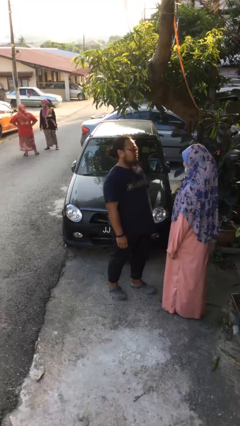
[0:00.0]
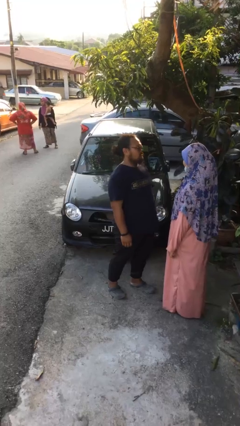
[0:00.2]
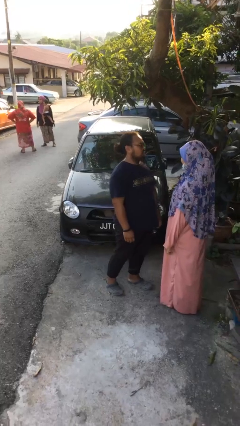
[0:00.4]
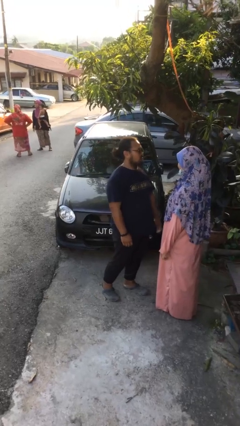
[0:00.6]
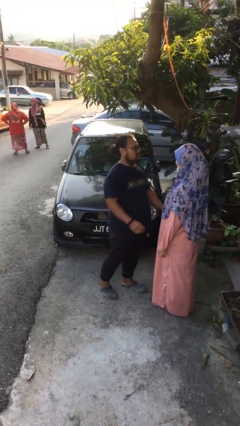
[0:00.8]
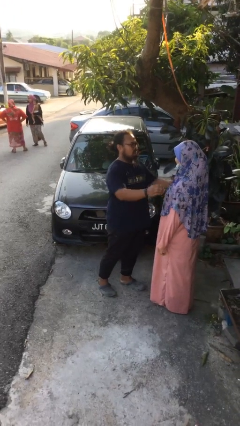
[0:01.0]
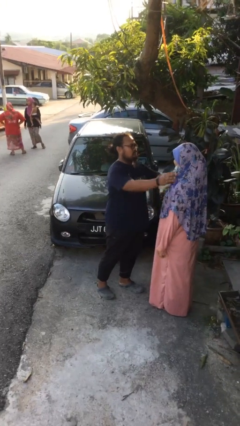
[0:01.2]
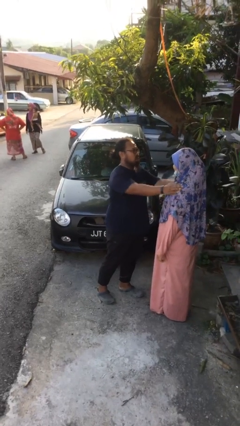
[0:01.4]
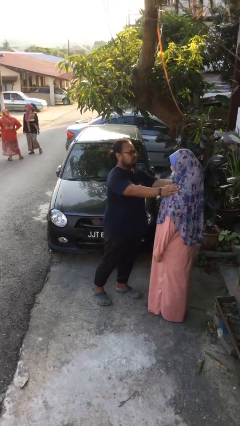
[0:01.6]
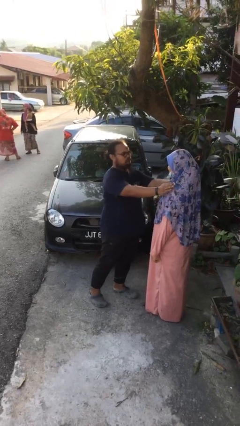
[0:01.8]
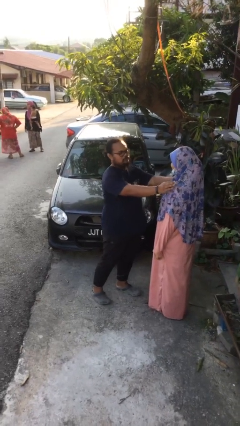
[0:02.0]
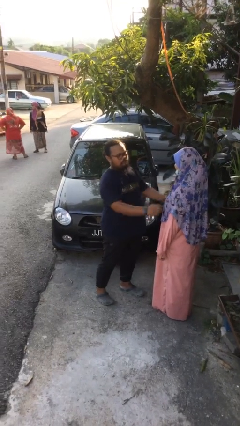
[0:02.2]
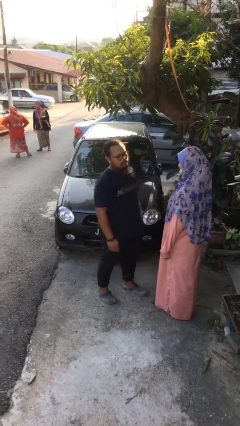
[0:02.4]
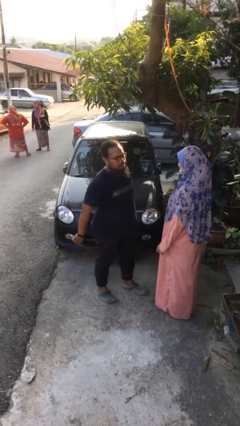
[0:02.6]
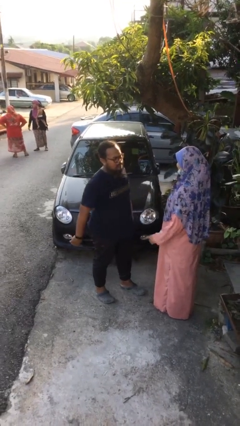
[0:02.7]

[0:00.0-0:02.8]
person pounds shoulders of person

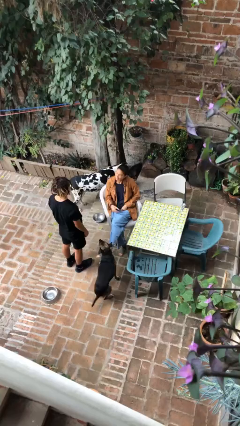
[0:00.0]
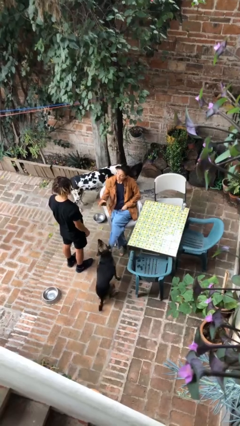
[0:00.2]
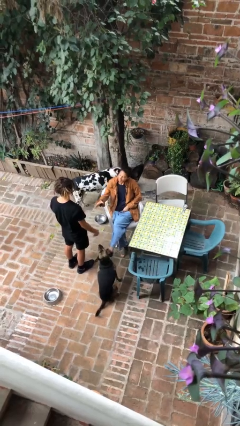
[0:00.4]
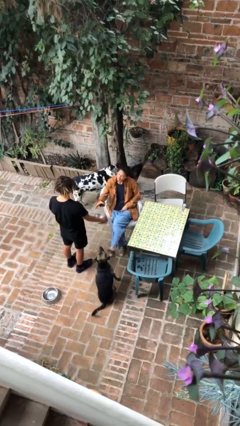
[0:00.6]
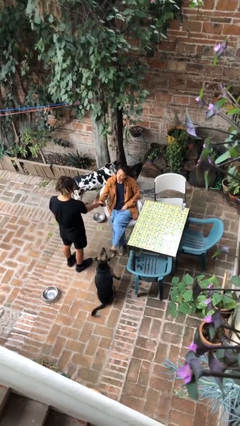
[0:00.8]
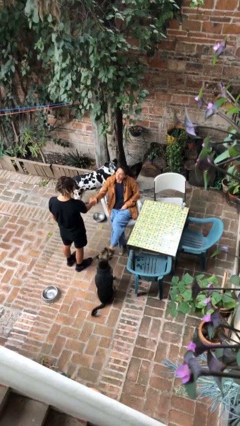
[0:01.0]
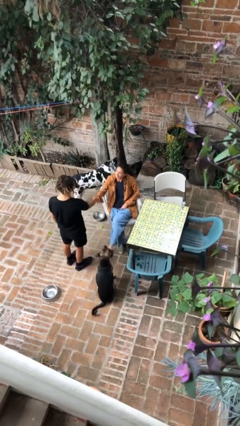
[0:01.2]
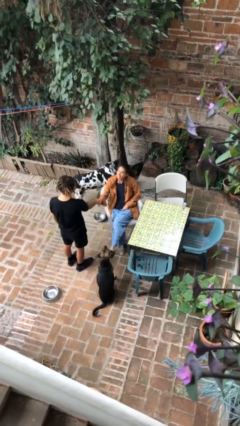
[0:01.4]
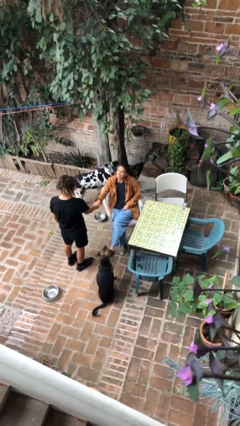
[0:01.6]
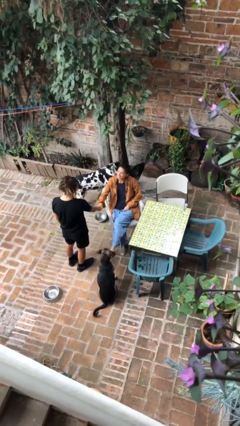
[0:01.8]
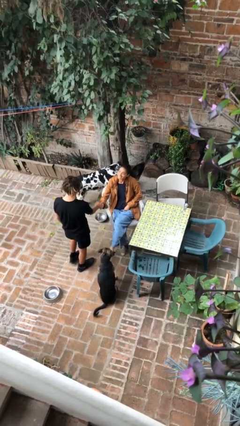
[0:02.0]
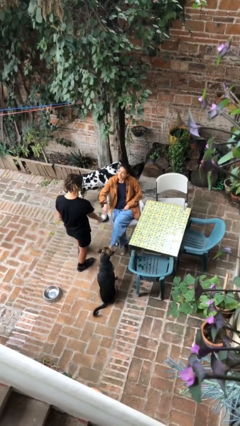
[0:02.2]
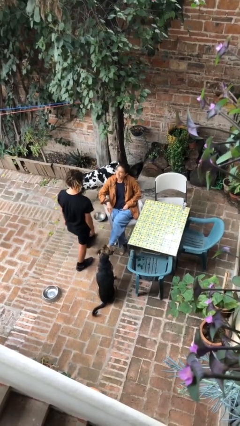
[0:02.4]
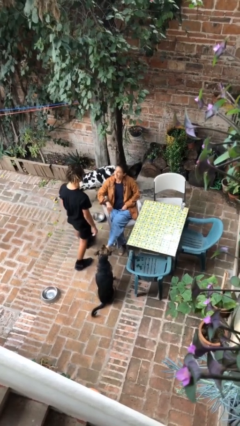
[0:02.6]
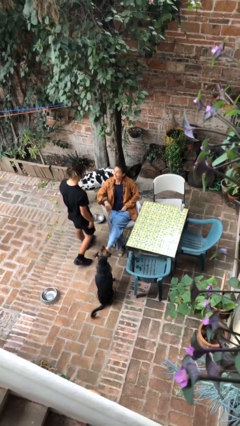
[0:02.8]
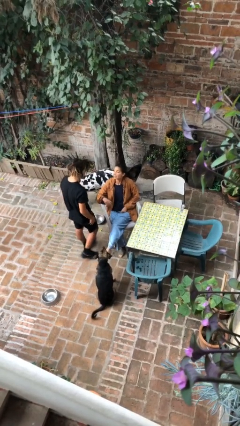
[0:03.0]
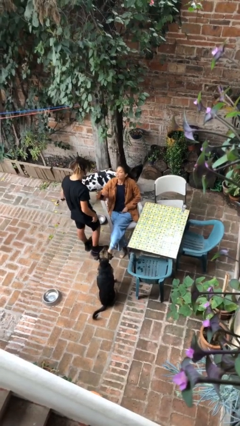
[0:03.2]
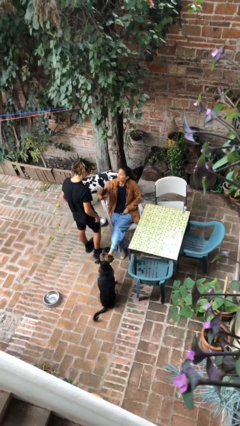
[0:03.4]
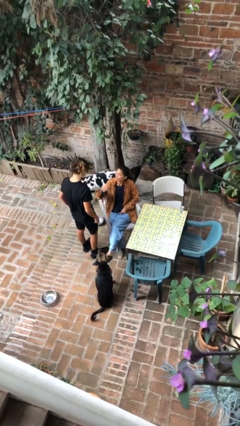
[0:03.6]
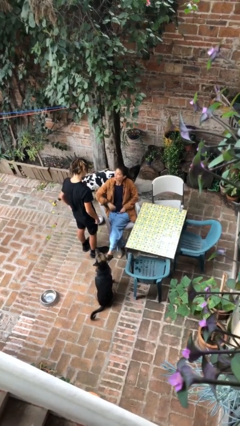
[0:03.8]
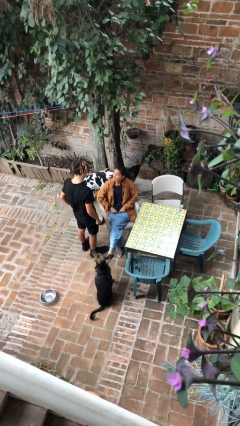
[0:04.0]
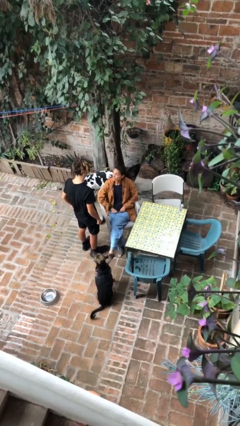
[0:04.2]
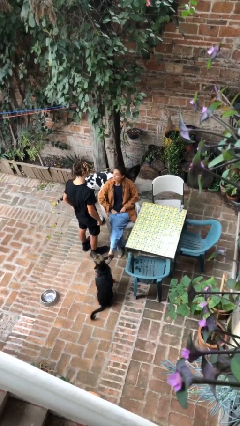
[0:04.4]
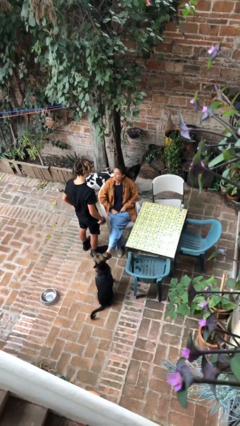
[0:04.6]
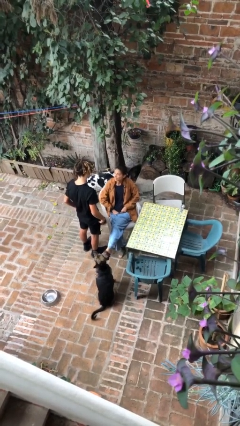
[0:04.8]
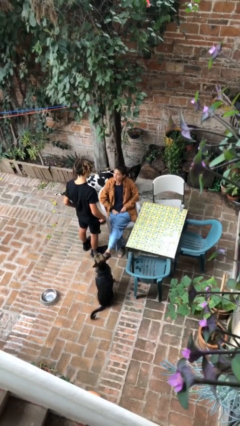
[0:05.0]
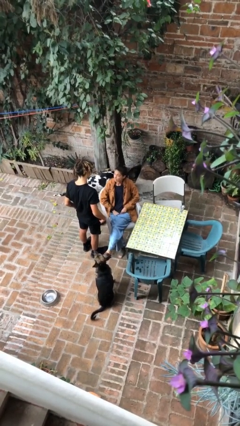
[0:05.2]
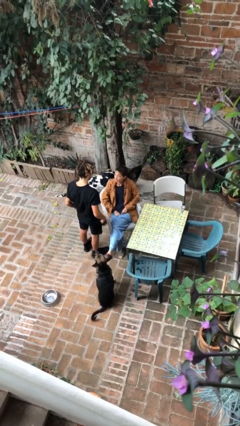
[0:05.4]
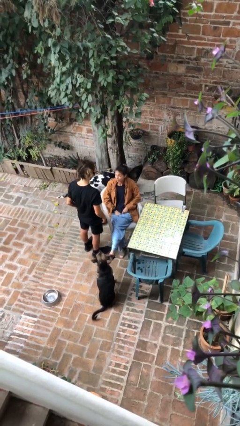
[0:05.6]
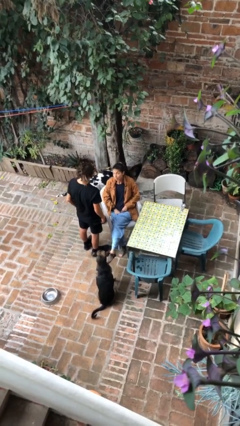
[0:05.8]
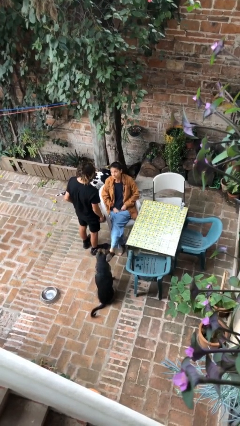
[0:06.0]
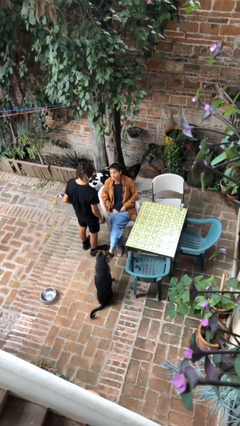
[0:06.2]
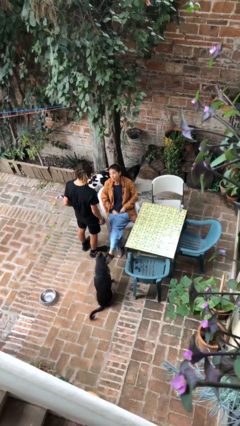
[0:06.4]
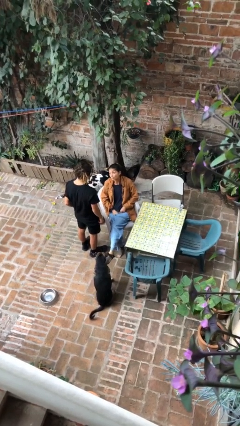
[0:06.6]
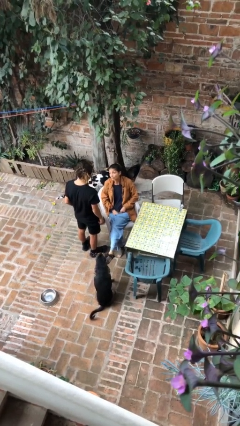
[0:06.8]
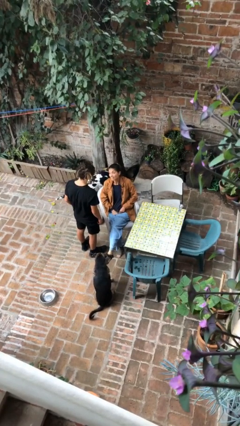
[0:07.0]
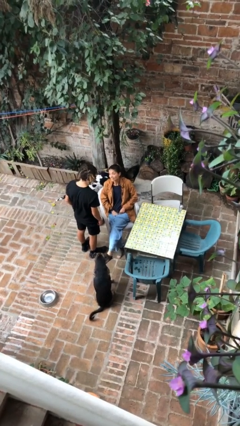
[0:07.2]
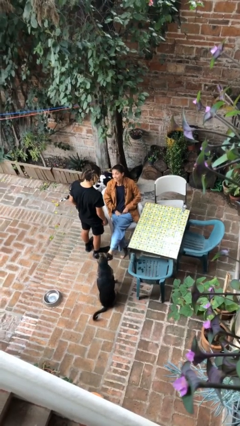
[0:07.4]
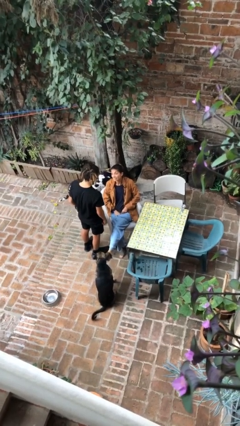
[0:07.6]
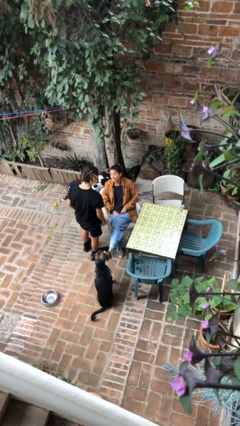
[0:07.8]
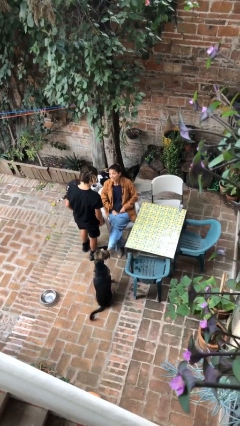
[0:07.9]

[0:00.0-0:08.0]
person shakes hand

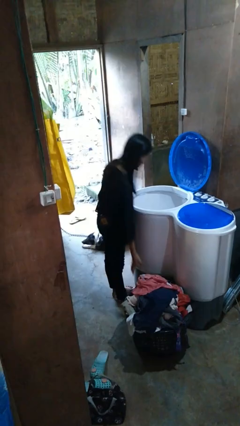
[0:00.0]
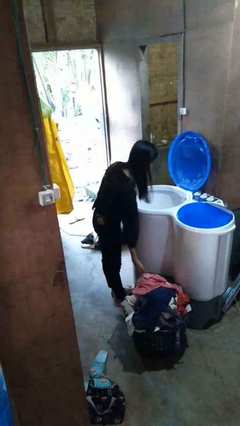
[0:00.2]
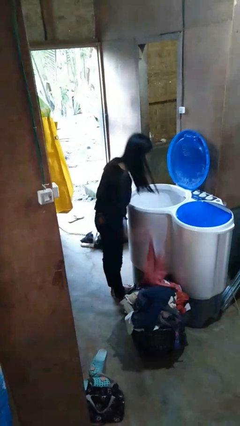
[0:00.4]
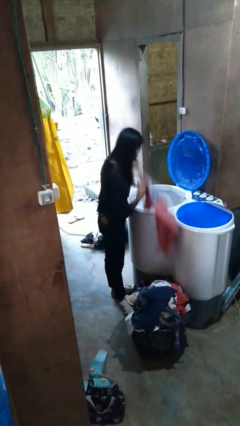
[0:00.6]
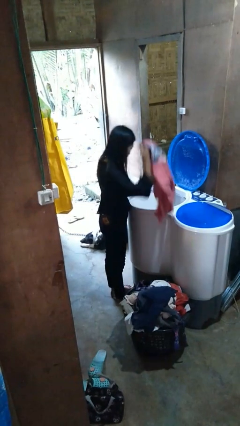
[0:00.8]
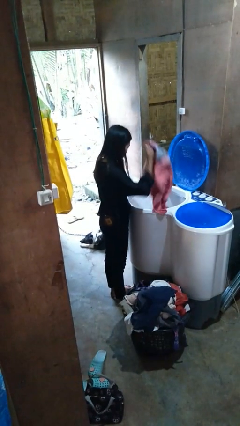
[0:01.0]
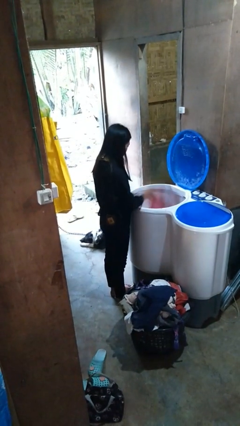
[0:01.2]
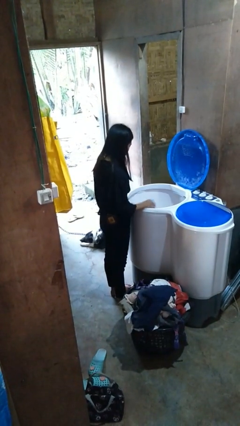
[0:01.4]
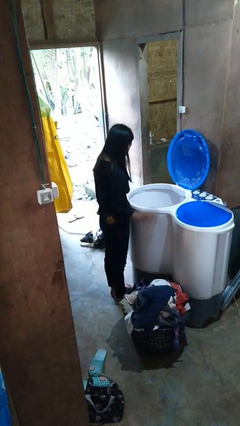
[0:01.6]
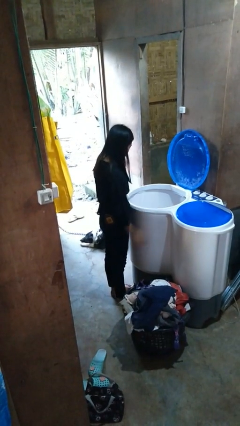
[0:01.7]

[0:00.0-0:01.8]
person loads clotheswasher

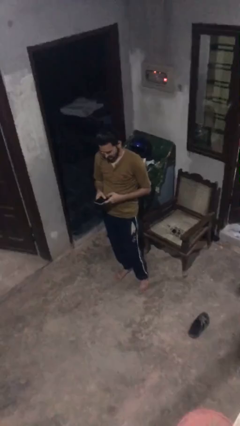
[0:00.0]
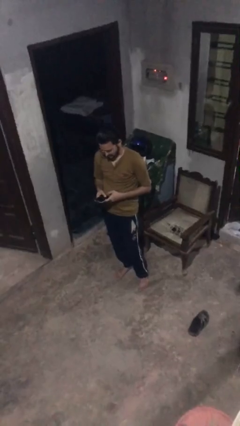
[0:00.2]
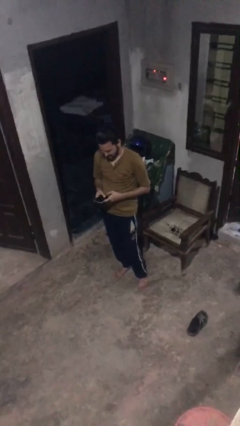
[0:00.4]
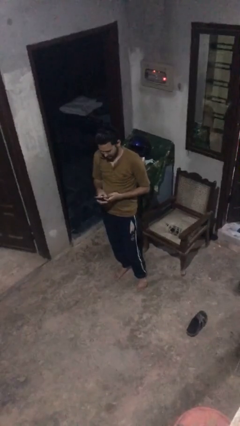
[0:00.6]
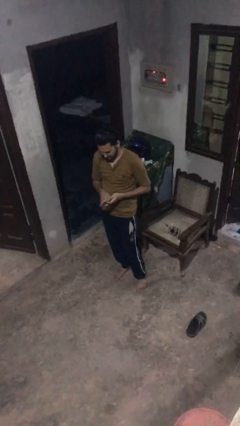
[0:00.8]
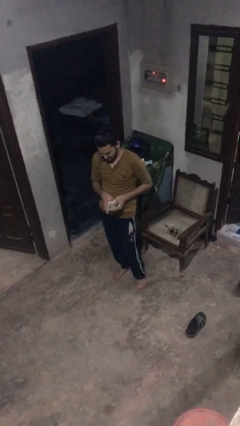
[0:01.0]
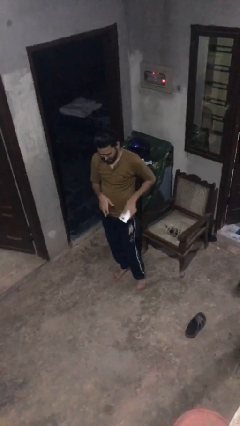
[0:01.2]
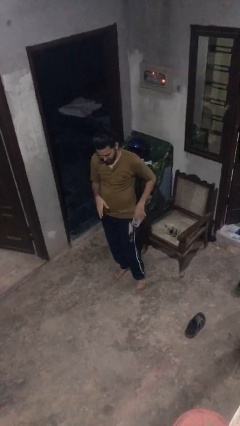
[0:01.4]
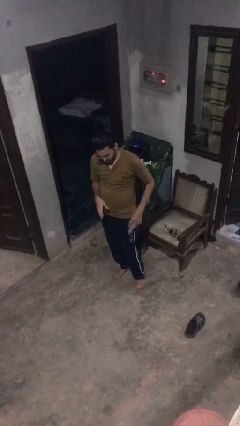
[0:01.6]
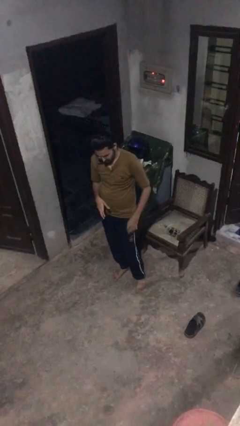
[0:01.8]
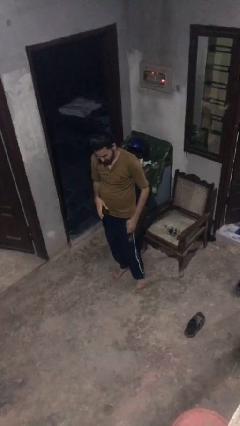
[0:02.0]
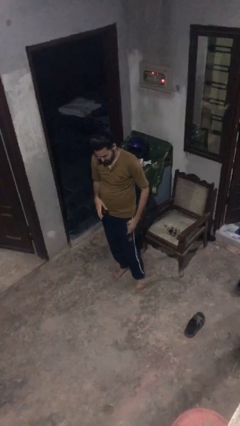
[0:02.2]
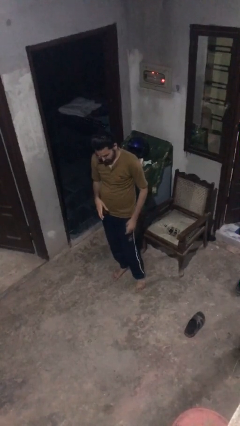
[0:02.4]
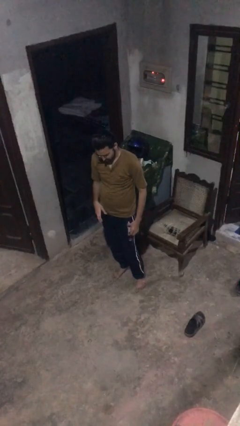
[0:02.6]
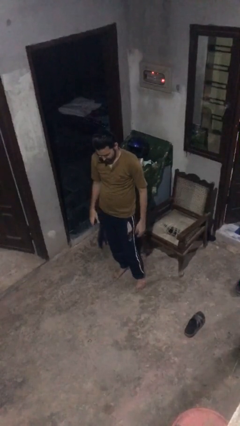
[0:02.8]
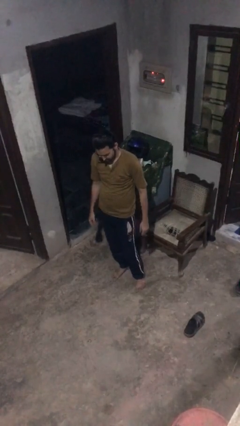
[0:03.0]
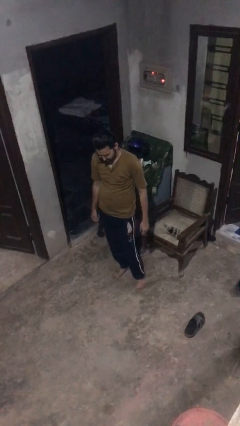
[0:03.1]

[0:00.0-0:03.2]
person puts phone into pocket

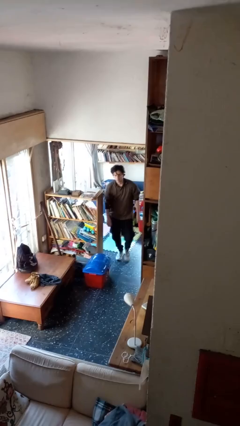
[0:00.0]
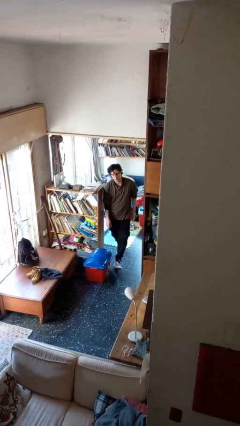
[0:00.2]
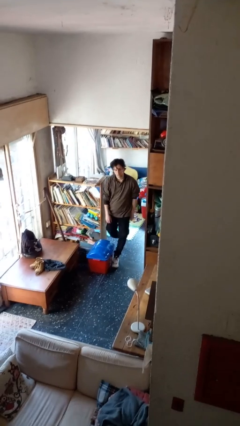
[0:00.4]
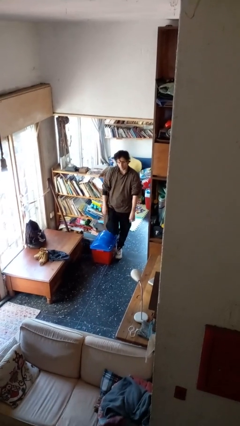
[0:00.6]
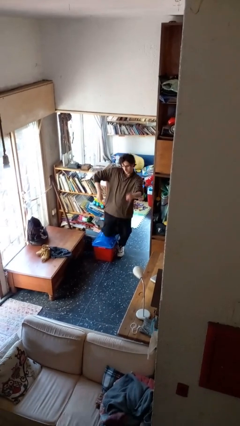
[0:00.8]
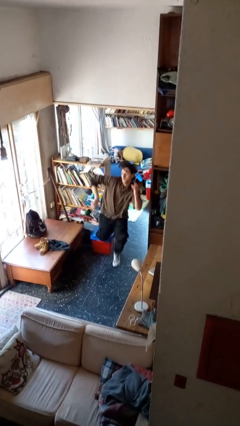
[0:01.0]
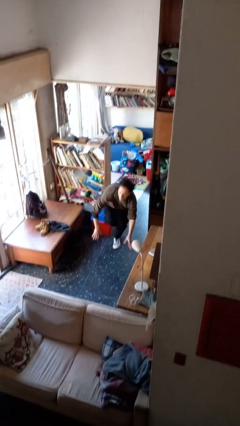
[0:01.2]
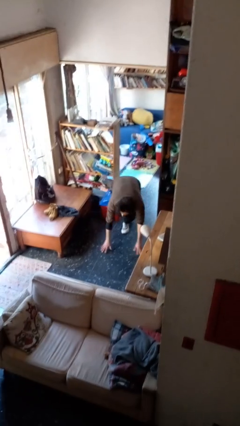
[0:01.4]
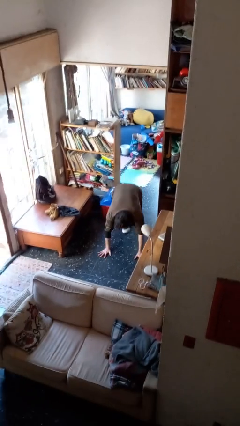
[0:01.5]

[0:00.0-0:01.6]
person trips on object on floor

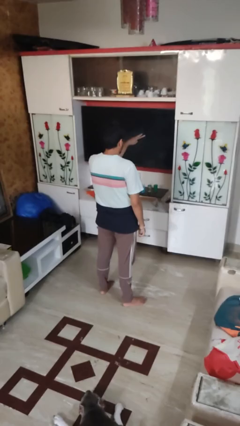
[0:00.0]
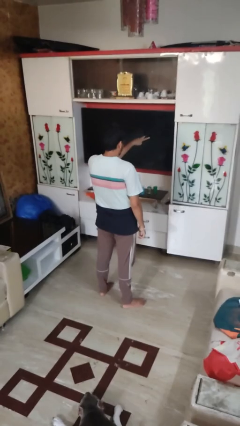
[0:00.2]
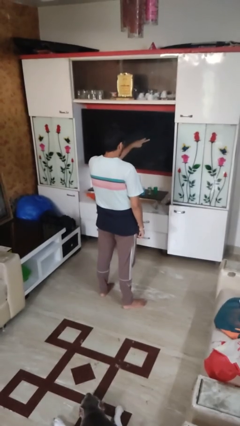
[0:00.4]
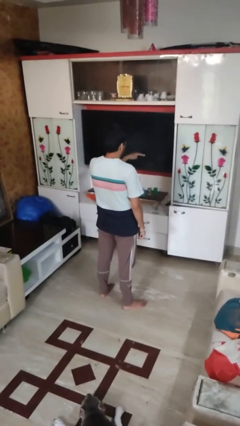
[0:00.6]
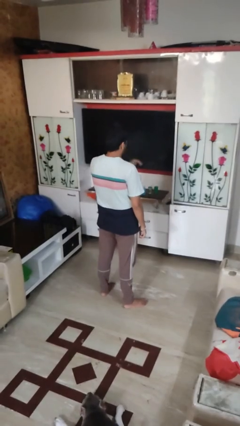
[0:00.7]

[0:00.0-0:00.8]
person gestures watch closely
